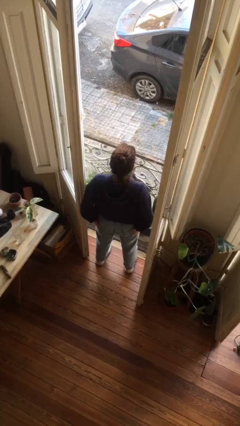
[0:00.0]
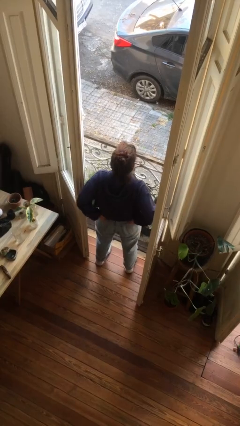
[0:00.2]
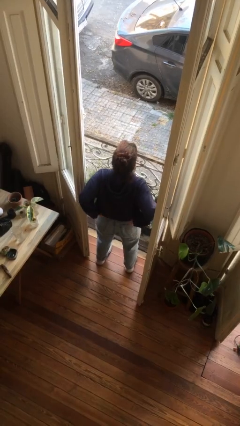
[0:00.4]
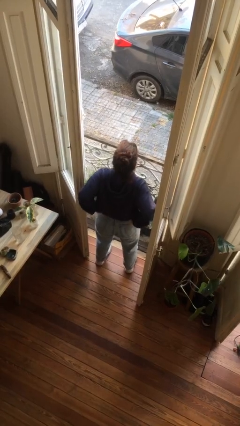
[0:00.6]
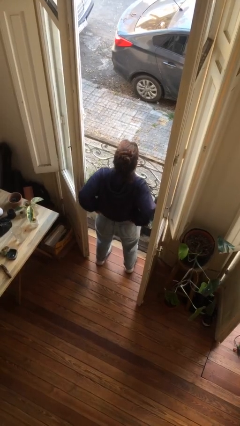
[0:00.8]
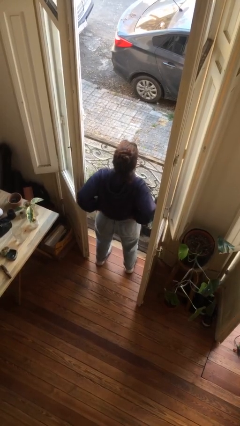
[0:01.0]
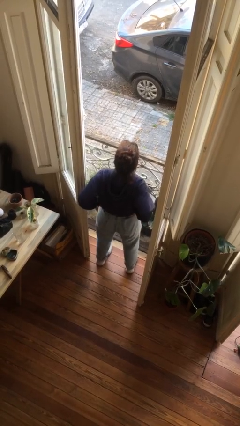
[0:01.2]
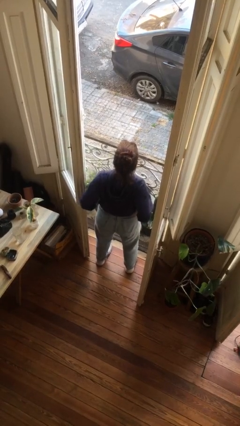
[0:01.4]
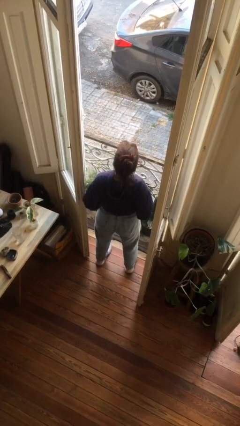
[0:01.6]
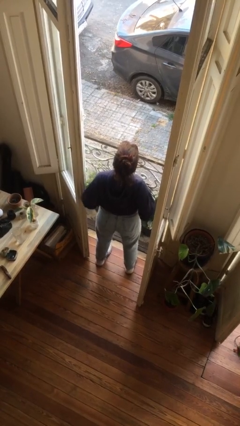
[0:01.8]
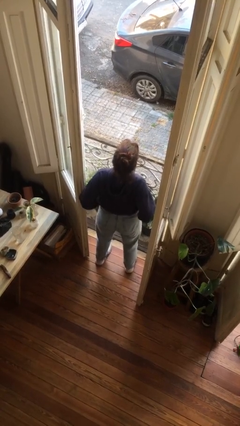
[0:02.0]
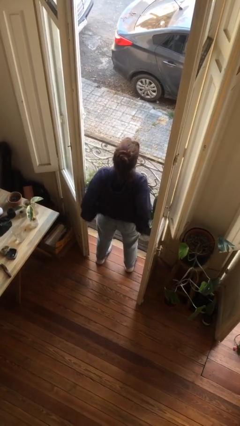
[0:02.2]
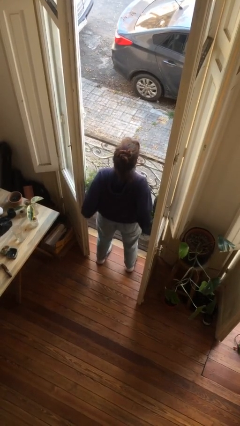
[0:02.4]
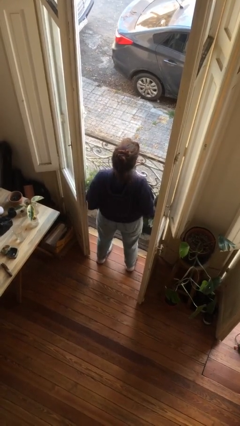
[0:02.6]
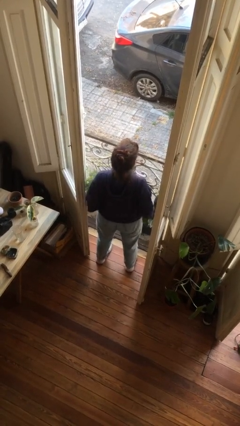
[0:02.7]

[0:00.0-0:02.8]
person hikes up pants

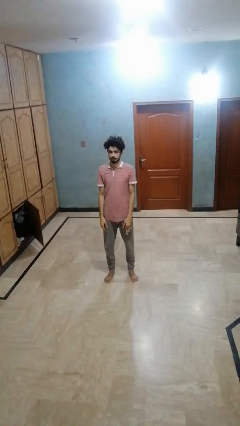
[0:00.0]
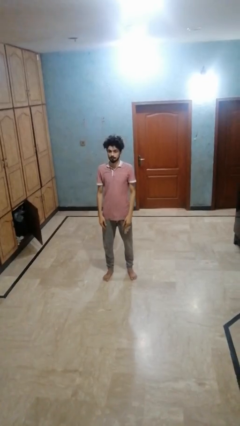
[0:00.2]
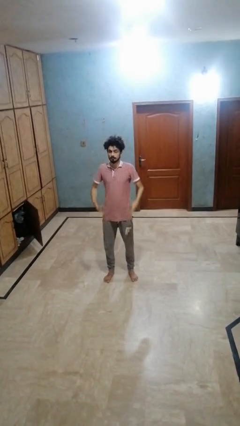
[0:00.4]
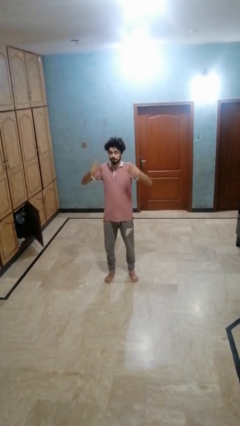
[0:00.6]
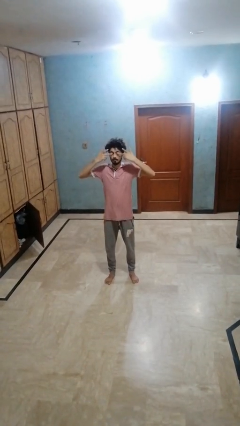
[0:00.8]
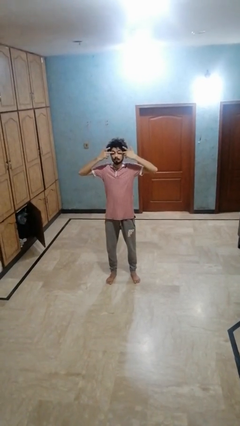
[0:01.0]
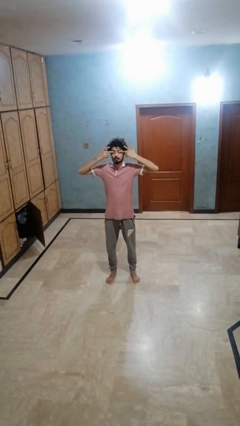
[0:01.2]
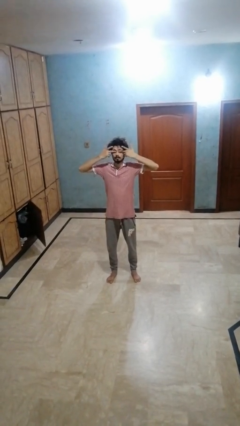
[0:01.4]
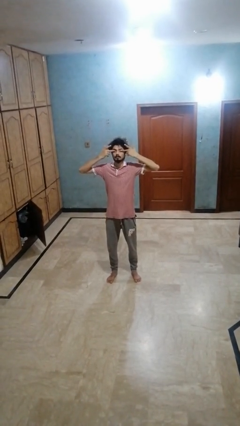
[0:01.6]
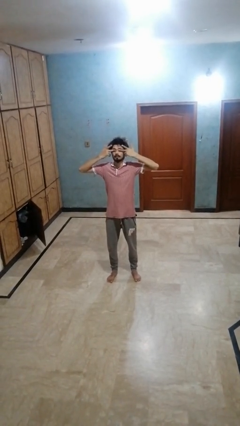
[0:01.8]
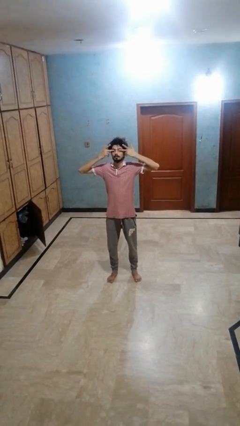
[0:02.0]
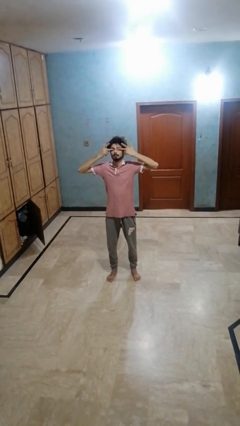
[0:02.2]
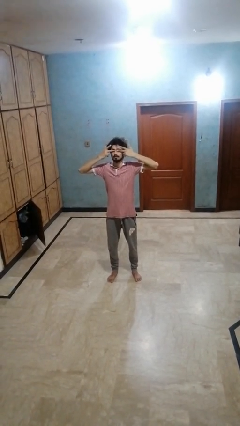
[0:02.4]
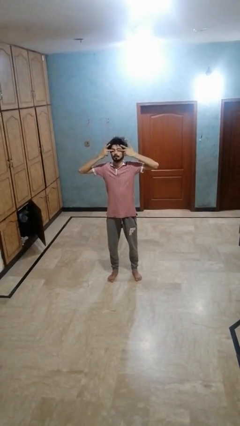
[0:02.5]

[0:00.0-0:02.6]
person rubs eyes

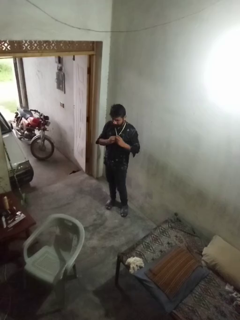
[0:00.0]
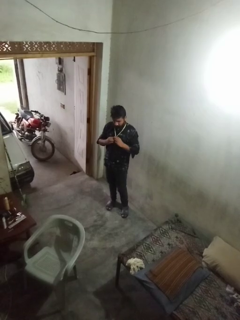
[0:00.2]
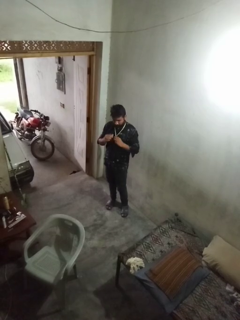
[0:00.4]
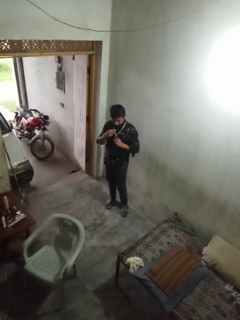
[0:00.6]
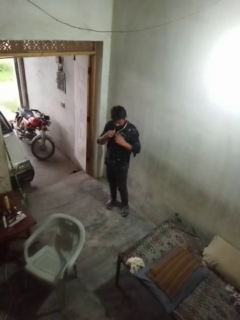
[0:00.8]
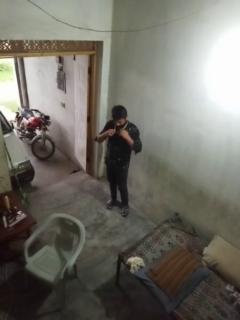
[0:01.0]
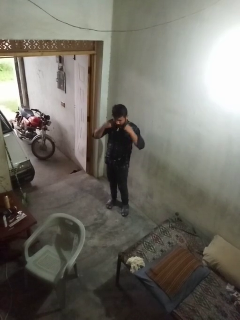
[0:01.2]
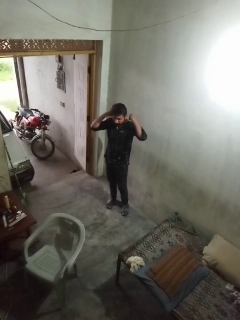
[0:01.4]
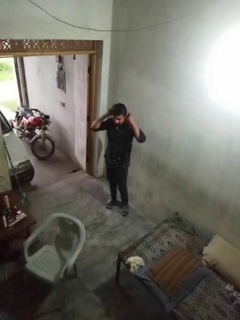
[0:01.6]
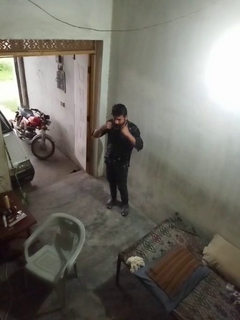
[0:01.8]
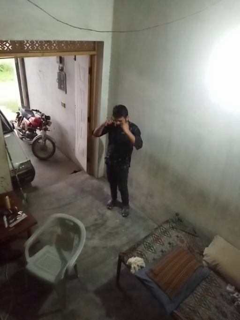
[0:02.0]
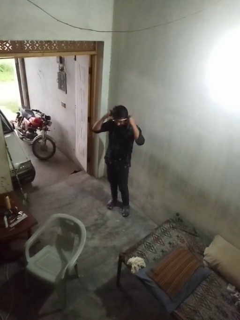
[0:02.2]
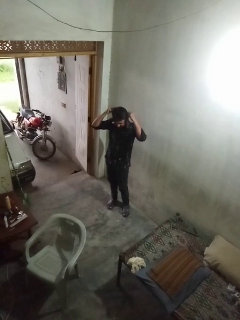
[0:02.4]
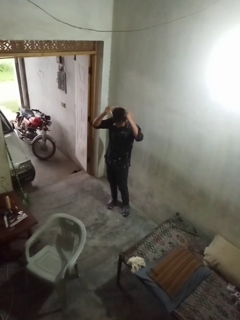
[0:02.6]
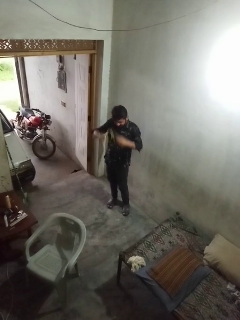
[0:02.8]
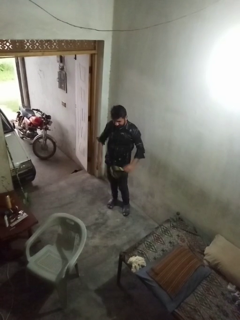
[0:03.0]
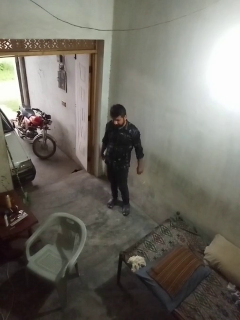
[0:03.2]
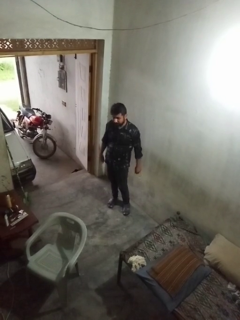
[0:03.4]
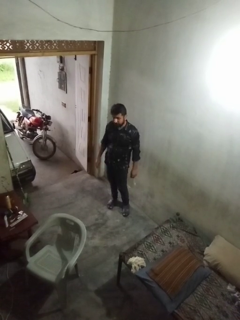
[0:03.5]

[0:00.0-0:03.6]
person takes off necklace

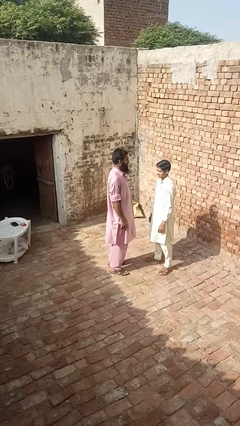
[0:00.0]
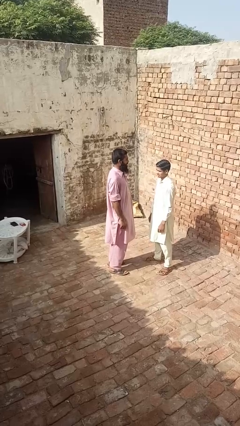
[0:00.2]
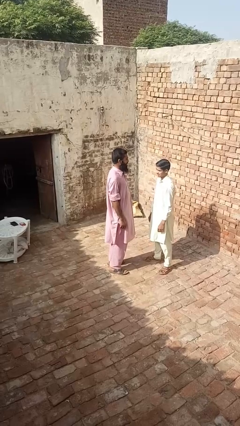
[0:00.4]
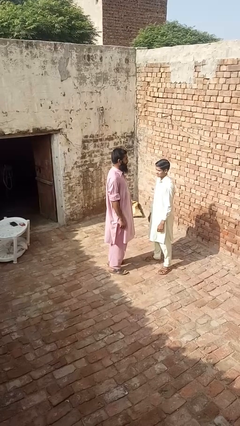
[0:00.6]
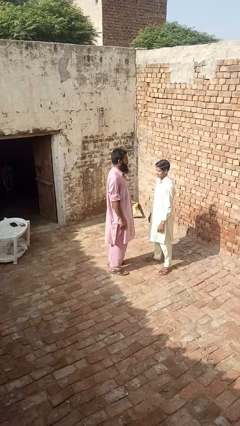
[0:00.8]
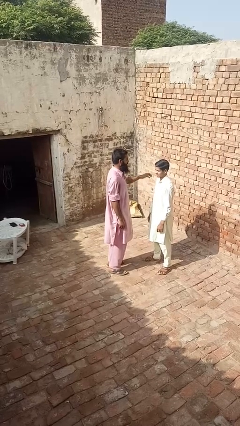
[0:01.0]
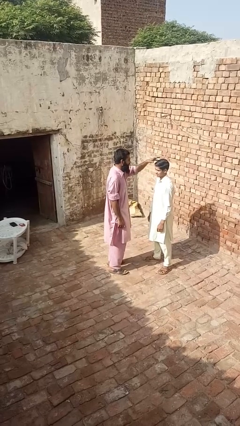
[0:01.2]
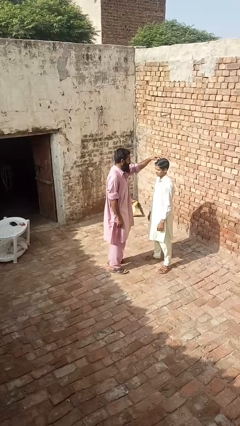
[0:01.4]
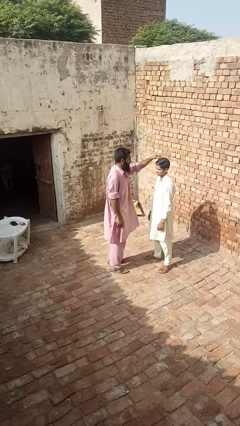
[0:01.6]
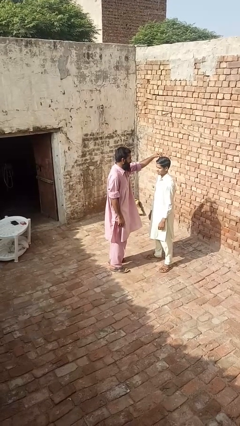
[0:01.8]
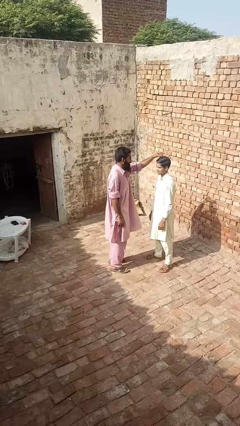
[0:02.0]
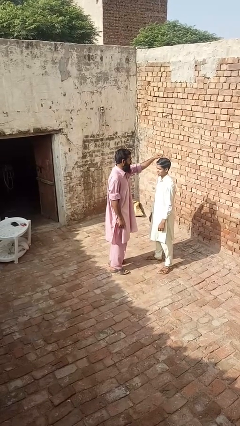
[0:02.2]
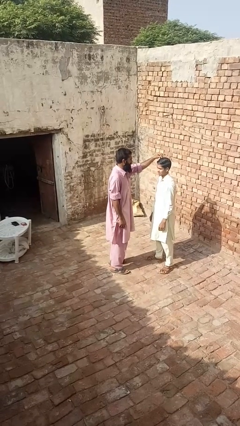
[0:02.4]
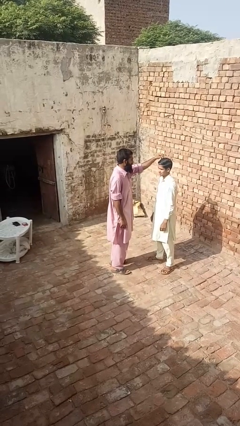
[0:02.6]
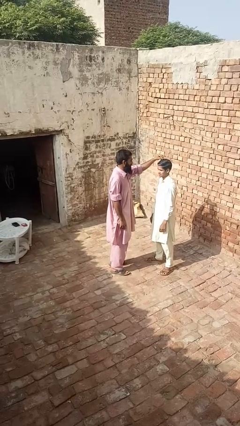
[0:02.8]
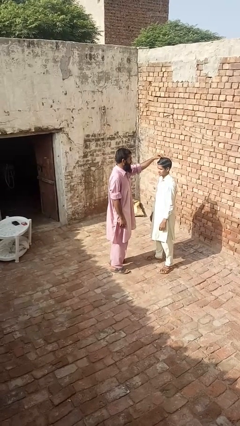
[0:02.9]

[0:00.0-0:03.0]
person grabs person by hair

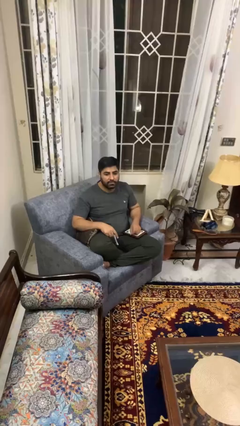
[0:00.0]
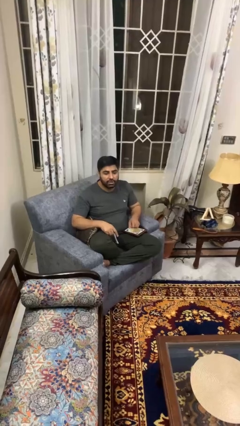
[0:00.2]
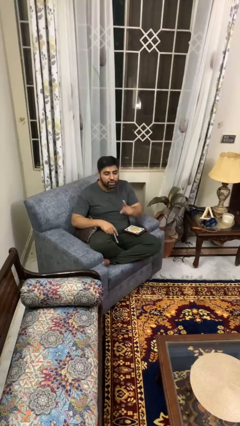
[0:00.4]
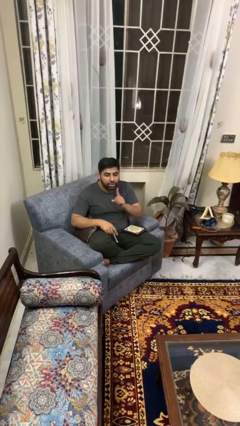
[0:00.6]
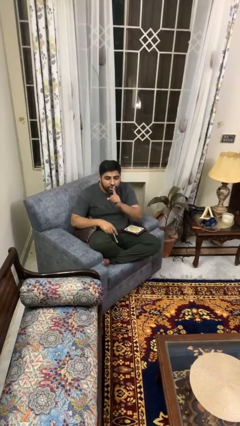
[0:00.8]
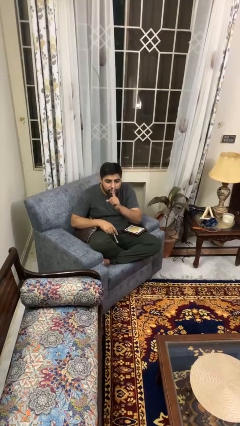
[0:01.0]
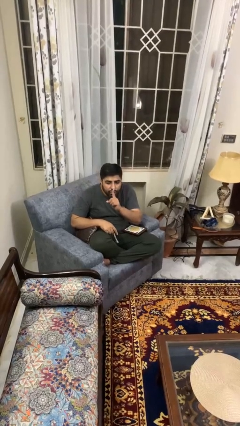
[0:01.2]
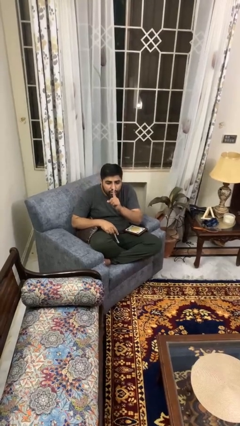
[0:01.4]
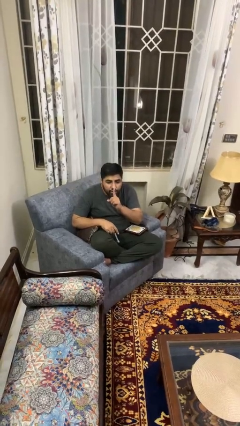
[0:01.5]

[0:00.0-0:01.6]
person gestures be quiet

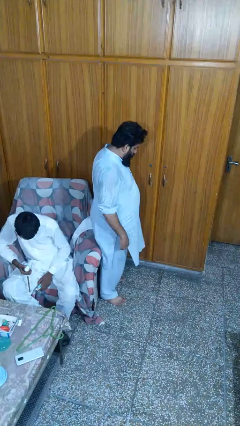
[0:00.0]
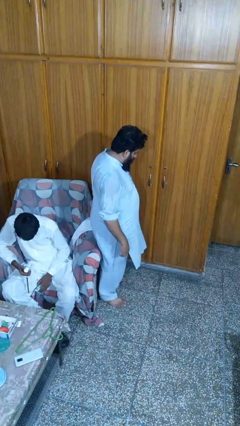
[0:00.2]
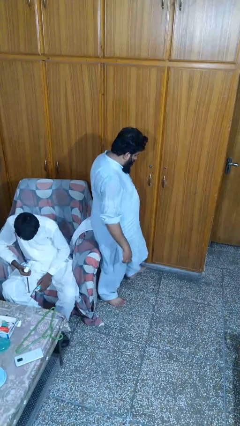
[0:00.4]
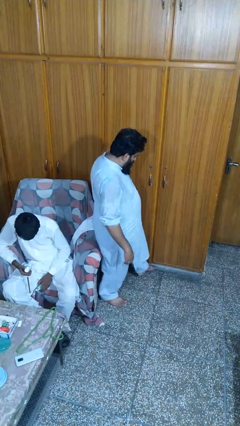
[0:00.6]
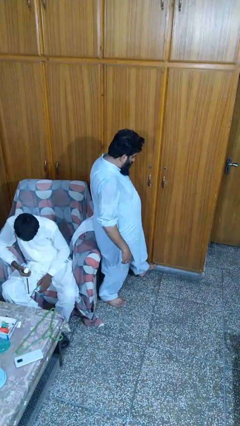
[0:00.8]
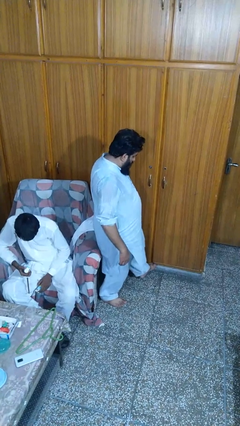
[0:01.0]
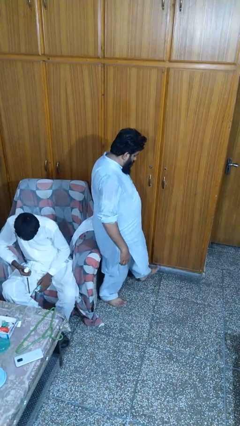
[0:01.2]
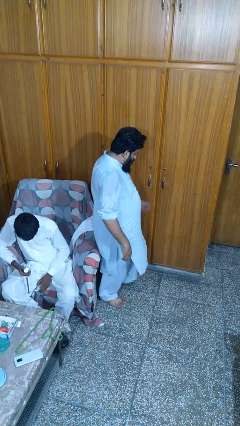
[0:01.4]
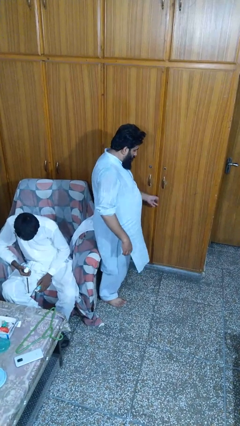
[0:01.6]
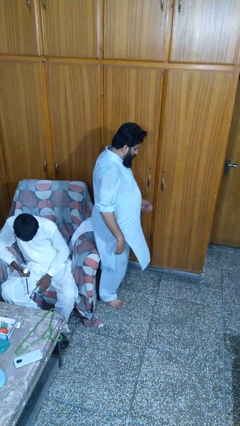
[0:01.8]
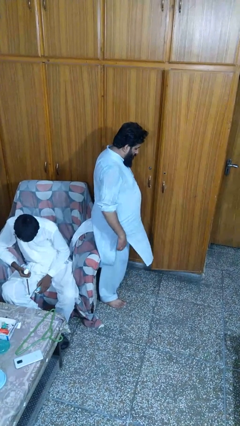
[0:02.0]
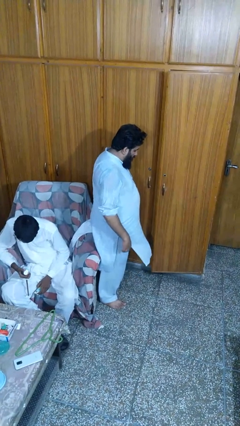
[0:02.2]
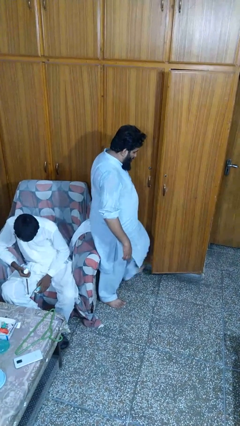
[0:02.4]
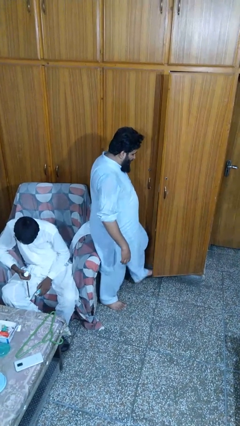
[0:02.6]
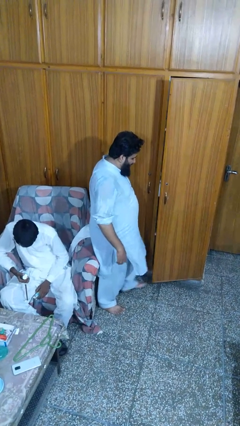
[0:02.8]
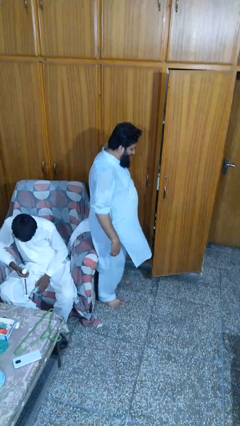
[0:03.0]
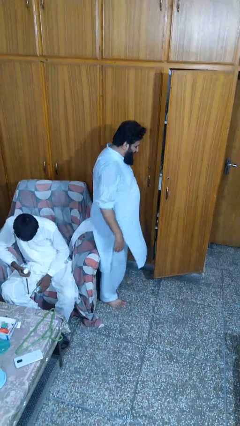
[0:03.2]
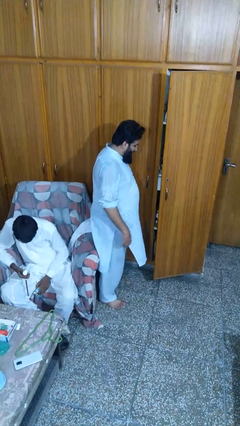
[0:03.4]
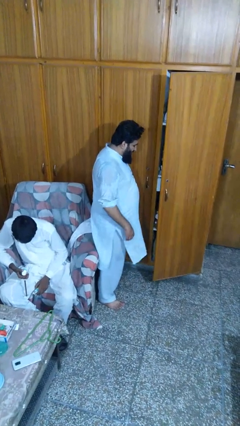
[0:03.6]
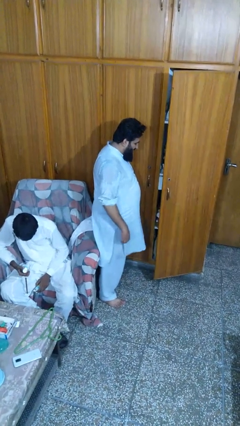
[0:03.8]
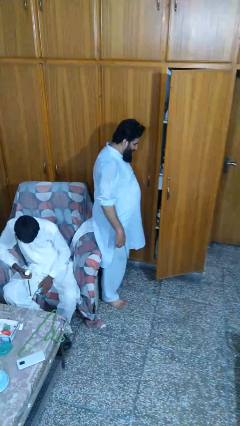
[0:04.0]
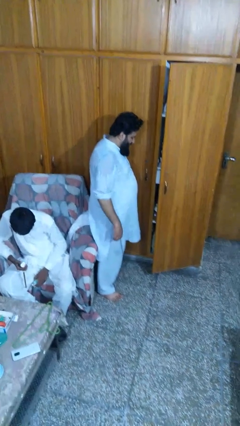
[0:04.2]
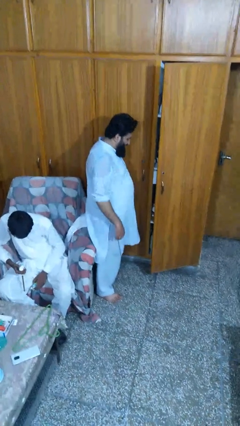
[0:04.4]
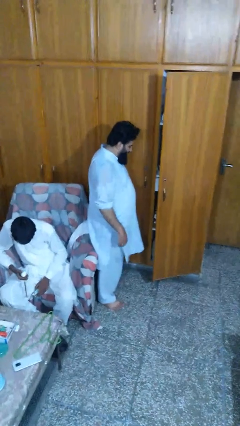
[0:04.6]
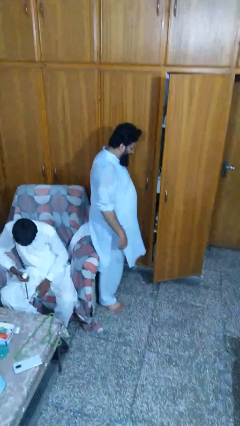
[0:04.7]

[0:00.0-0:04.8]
person opens facility door

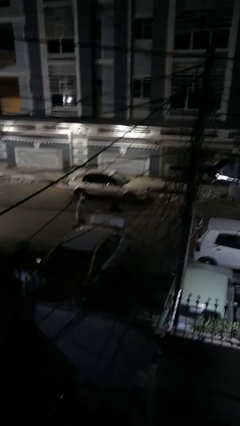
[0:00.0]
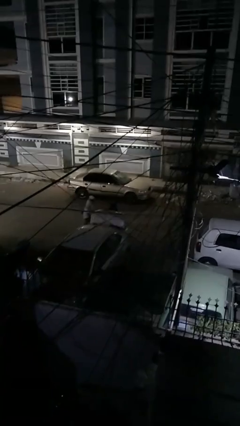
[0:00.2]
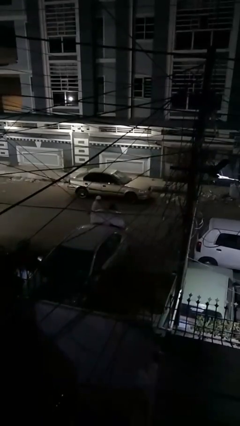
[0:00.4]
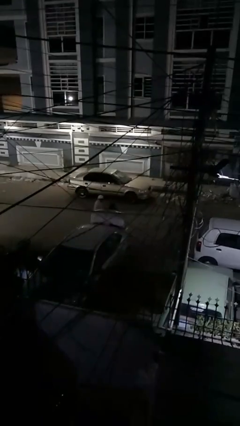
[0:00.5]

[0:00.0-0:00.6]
person unloads car
